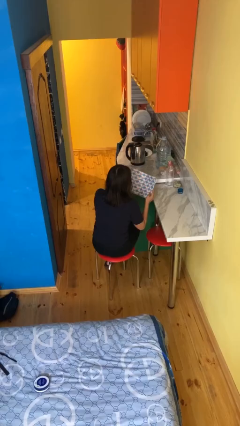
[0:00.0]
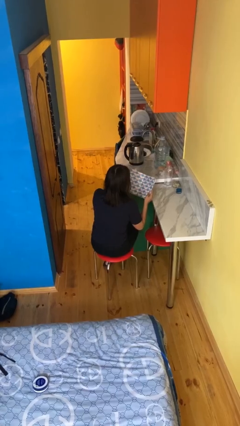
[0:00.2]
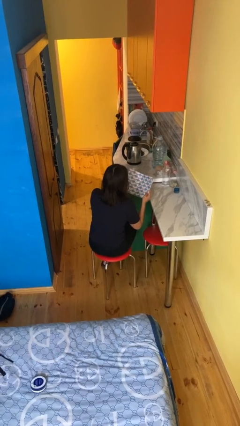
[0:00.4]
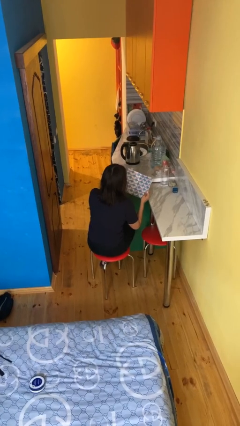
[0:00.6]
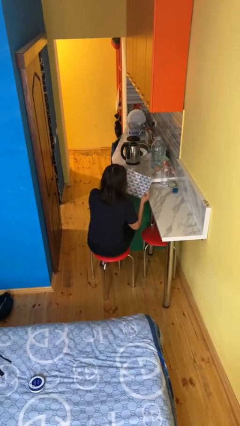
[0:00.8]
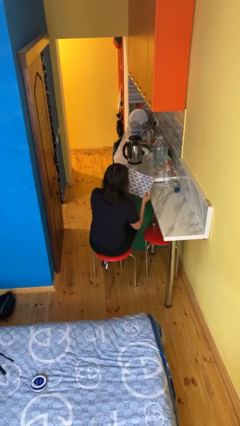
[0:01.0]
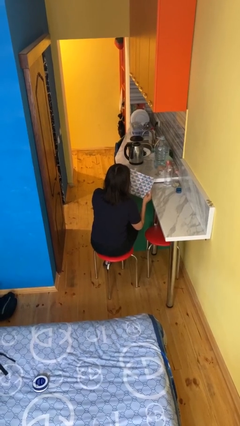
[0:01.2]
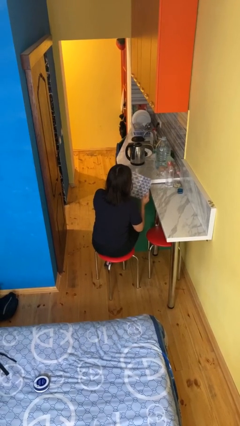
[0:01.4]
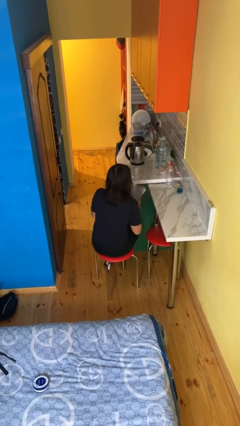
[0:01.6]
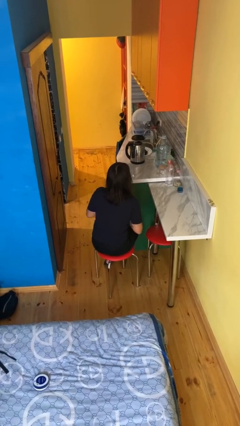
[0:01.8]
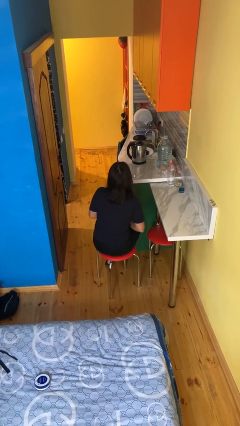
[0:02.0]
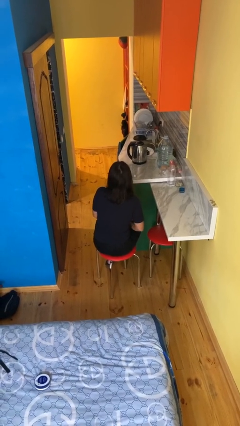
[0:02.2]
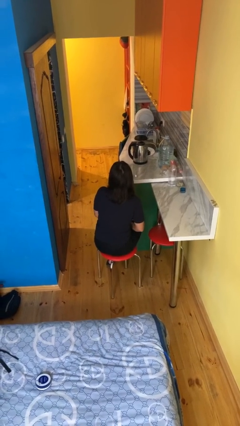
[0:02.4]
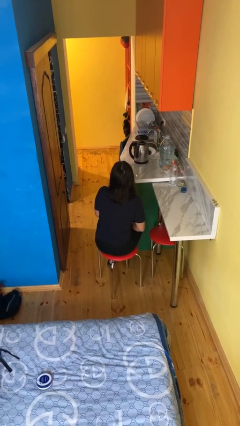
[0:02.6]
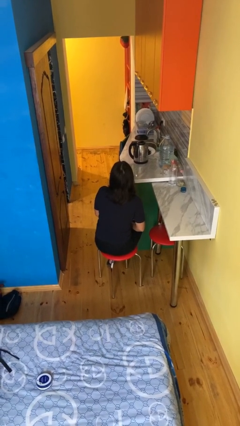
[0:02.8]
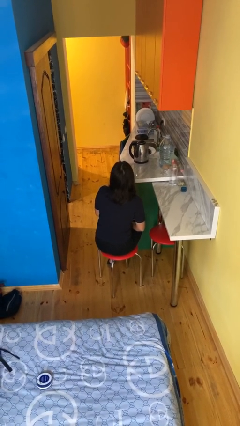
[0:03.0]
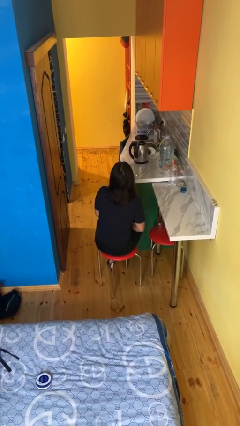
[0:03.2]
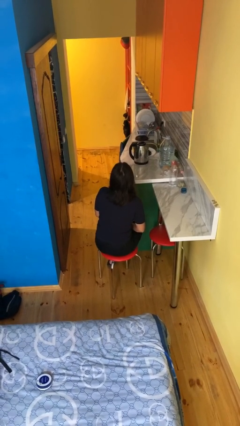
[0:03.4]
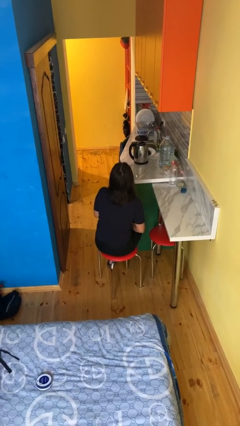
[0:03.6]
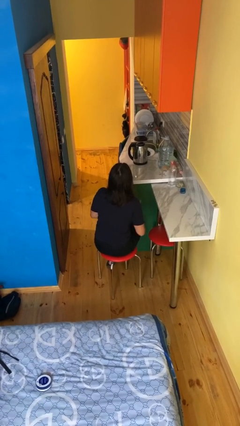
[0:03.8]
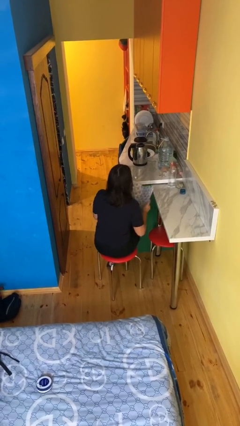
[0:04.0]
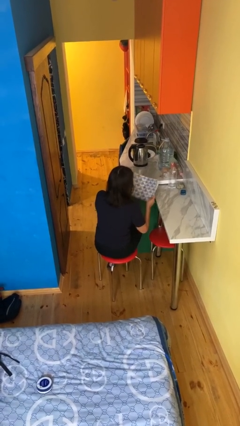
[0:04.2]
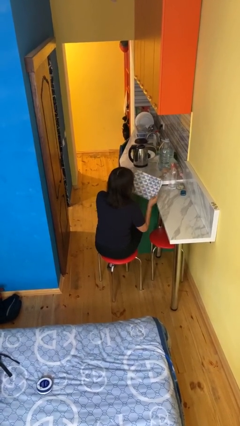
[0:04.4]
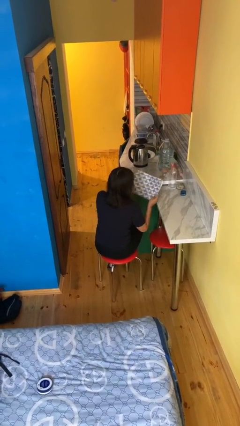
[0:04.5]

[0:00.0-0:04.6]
person reads magazine

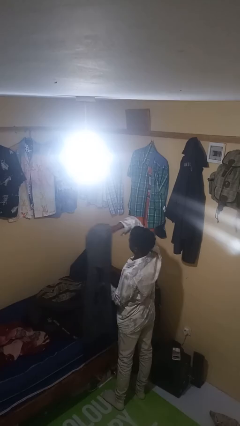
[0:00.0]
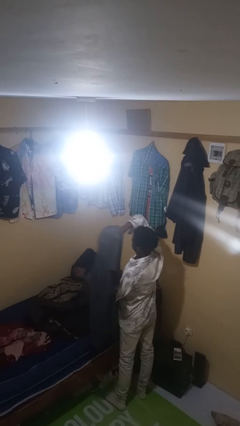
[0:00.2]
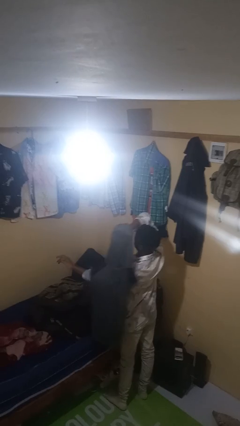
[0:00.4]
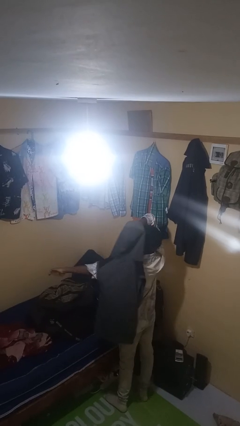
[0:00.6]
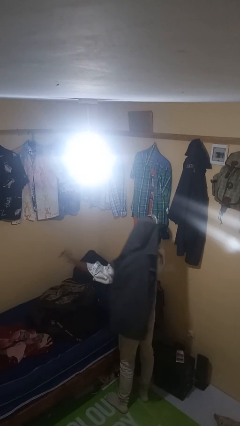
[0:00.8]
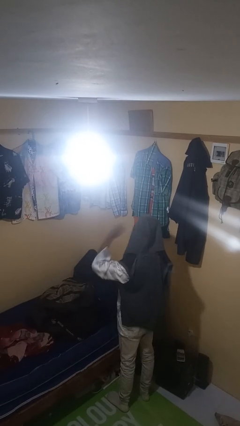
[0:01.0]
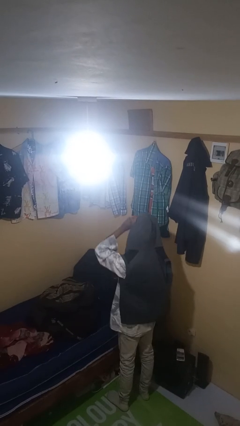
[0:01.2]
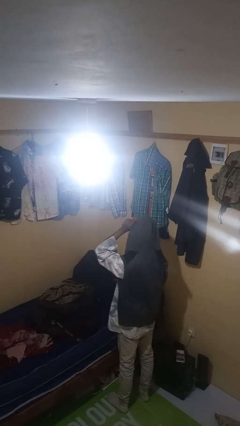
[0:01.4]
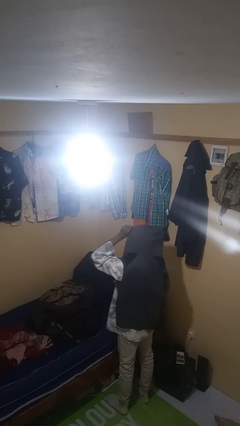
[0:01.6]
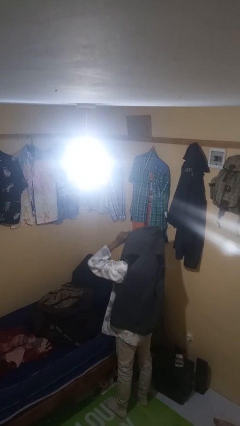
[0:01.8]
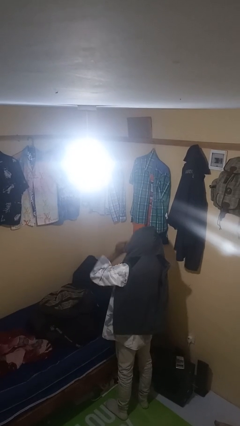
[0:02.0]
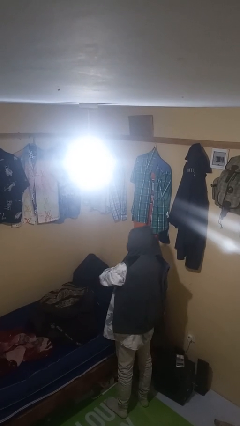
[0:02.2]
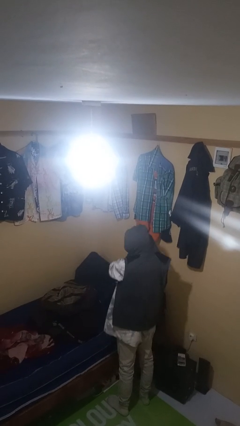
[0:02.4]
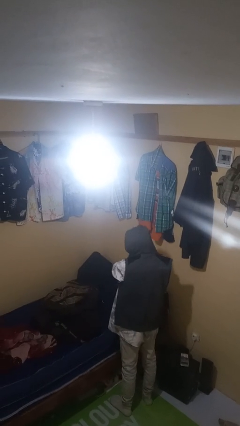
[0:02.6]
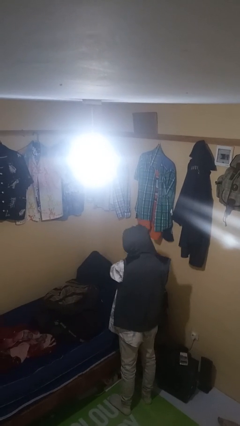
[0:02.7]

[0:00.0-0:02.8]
person puts on hoodie

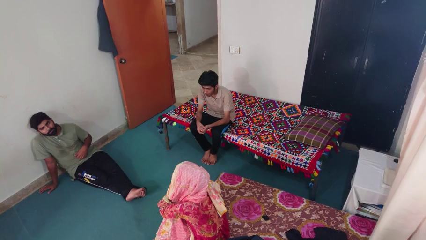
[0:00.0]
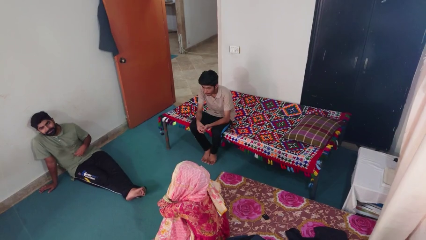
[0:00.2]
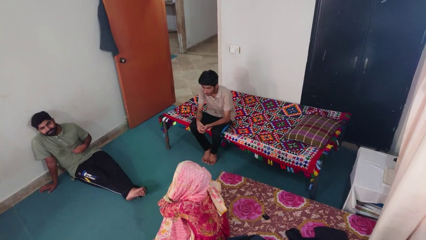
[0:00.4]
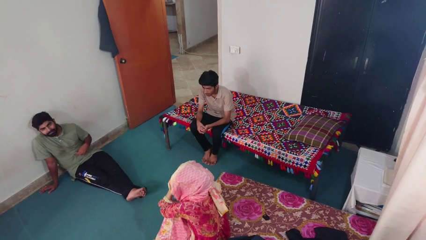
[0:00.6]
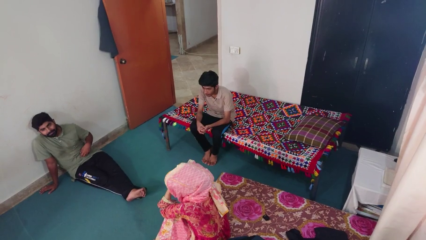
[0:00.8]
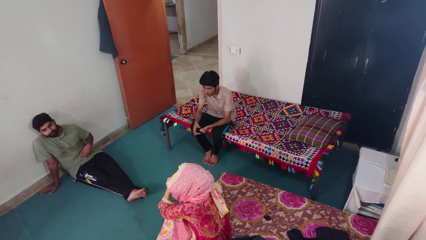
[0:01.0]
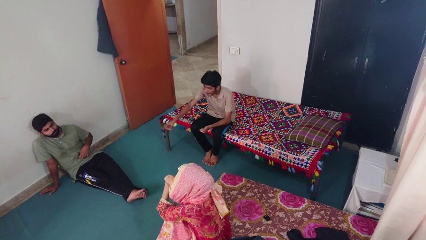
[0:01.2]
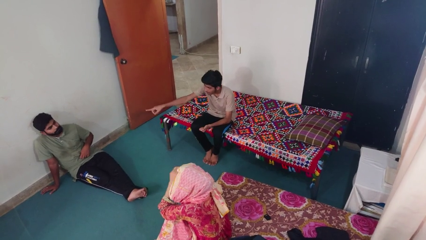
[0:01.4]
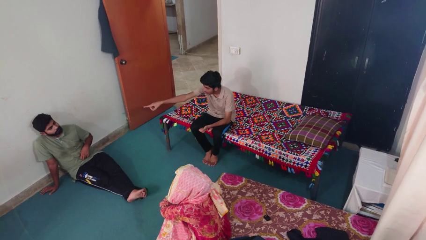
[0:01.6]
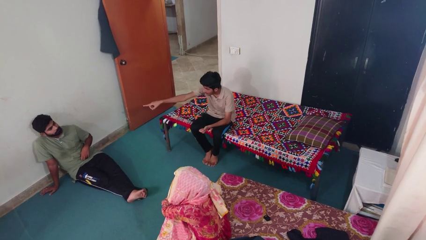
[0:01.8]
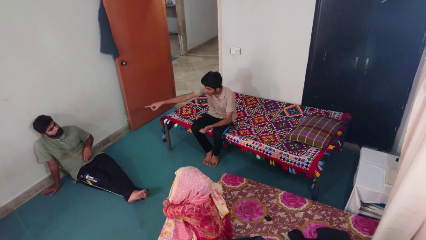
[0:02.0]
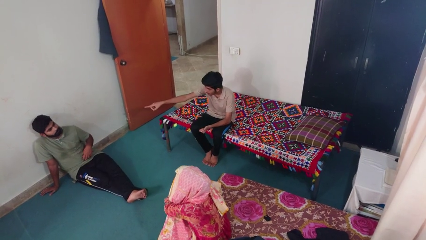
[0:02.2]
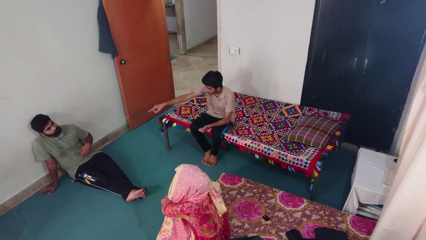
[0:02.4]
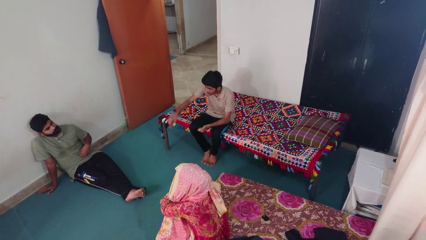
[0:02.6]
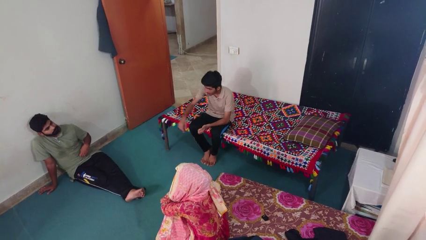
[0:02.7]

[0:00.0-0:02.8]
person points at person

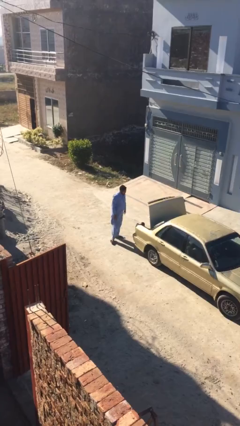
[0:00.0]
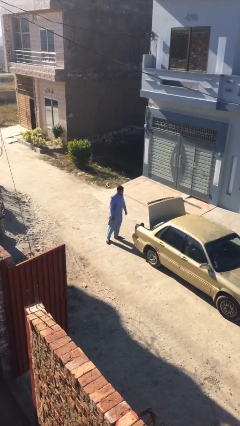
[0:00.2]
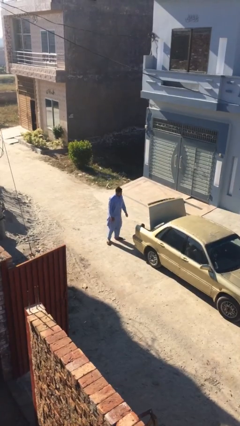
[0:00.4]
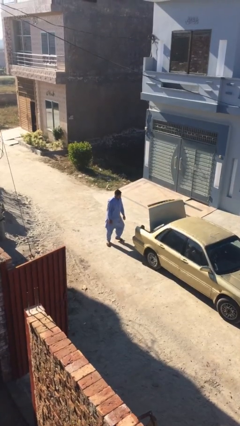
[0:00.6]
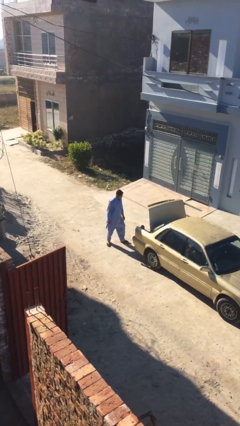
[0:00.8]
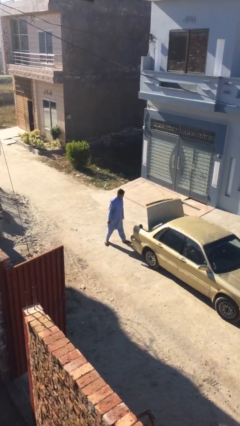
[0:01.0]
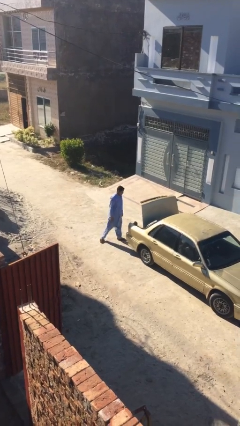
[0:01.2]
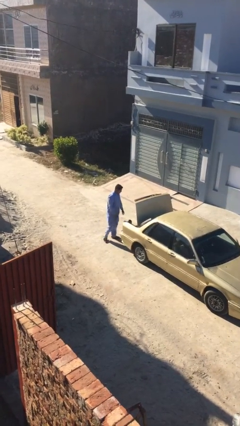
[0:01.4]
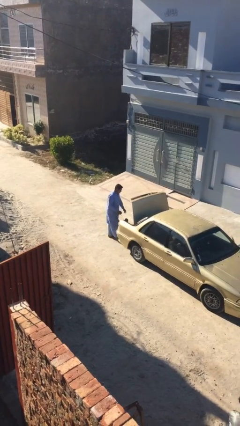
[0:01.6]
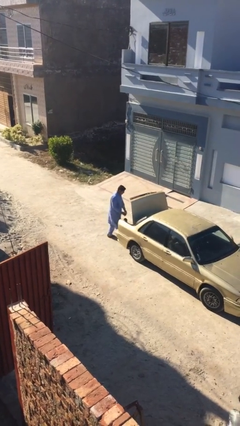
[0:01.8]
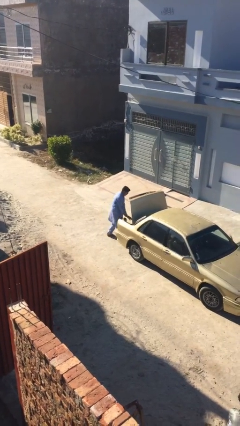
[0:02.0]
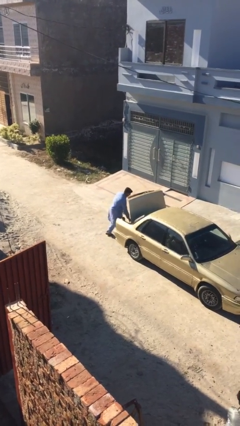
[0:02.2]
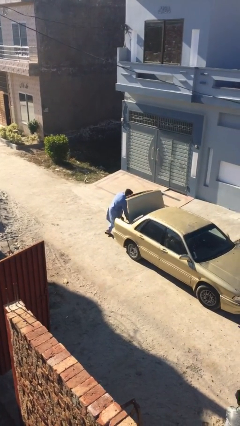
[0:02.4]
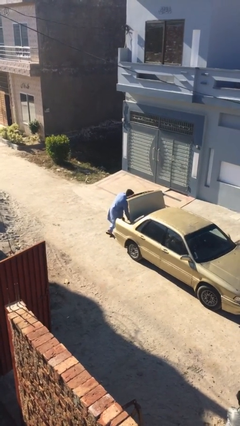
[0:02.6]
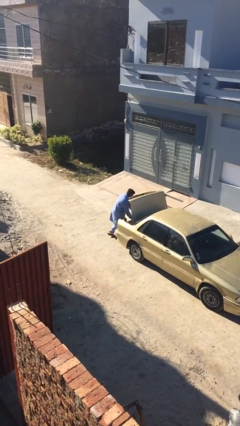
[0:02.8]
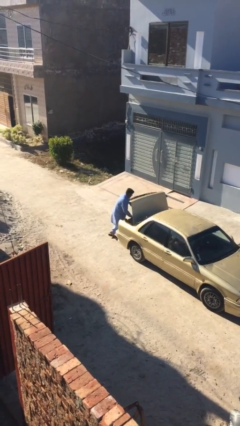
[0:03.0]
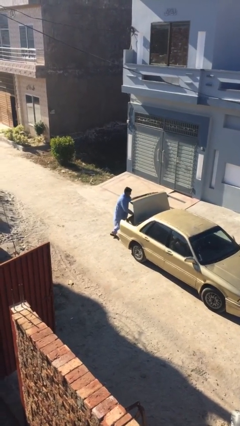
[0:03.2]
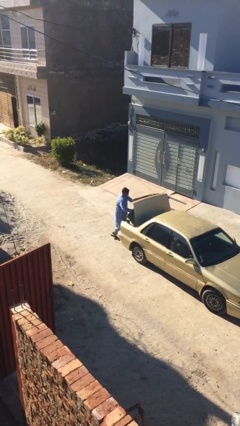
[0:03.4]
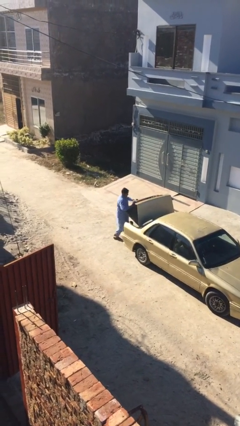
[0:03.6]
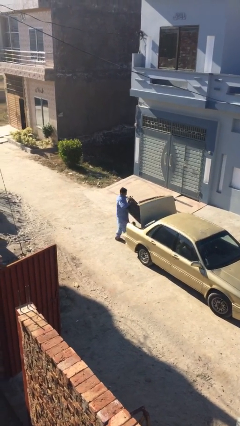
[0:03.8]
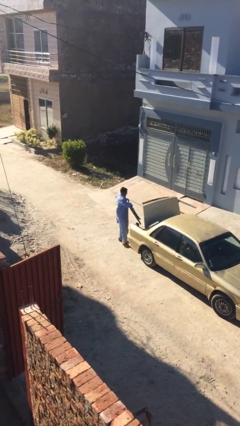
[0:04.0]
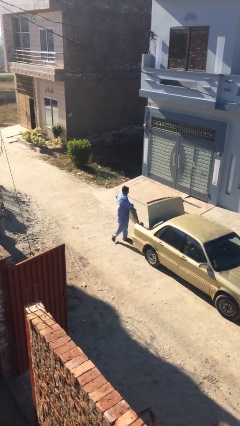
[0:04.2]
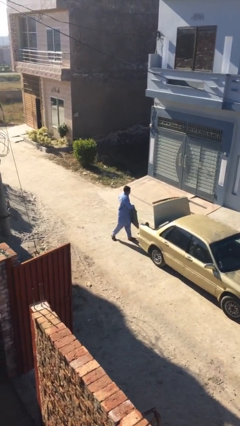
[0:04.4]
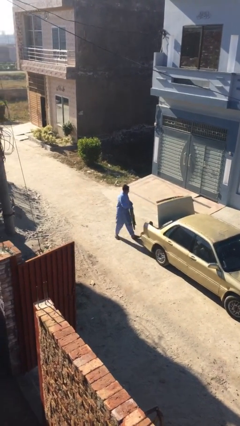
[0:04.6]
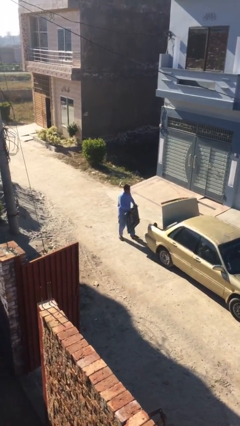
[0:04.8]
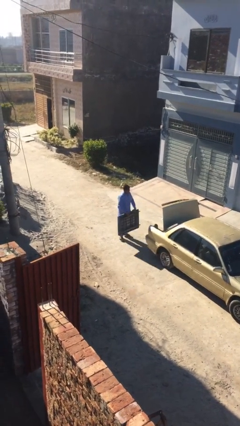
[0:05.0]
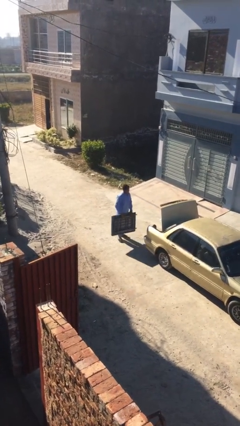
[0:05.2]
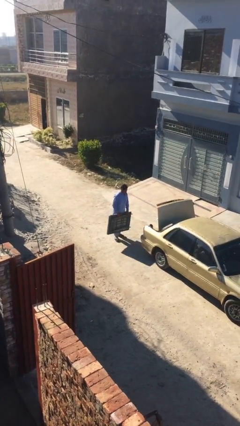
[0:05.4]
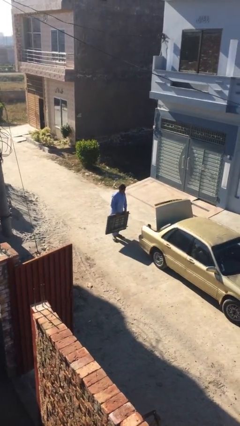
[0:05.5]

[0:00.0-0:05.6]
person unloads car

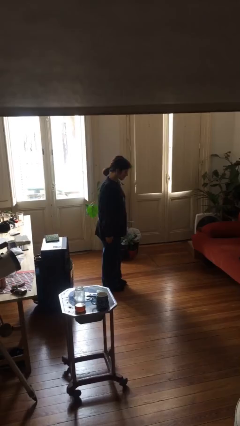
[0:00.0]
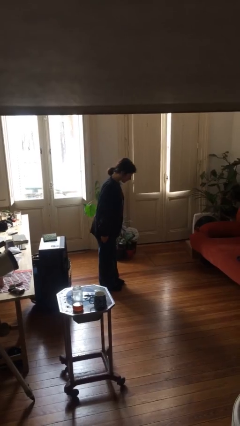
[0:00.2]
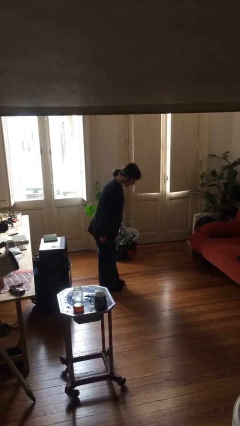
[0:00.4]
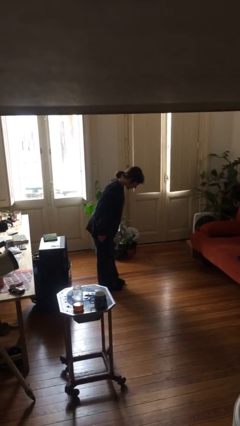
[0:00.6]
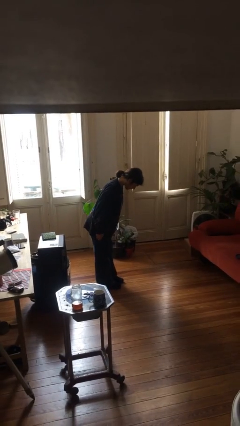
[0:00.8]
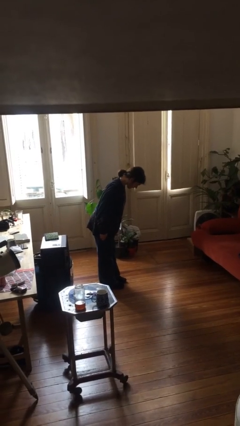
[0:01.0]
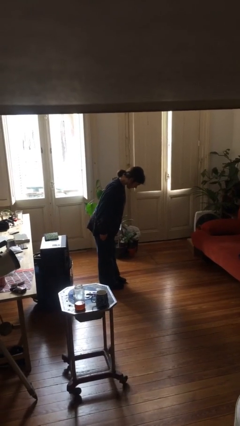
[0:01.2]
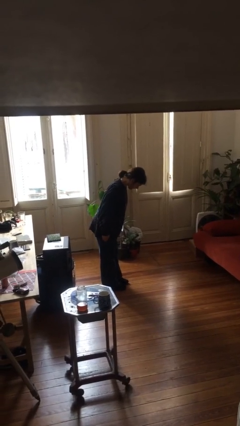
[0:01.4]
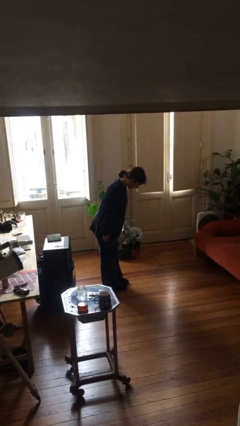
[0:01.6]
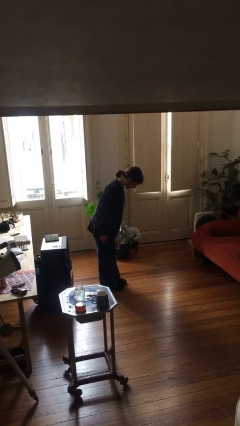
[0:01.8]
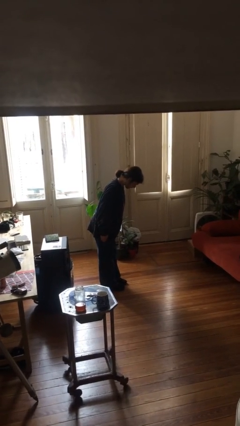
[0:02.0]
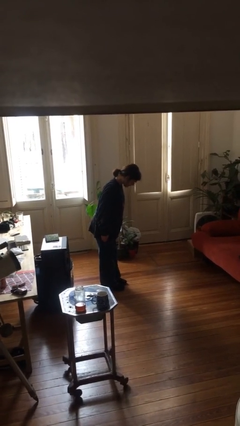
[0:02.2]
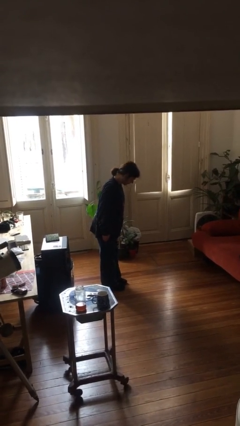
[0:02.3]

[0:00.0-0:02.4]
person bows
